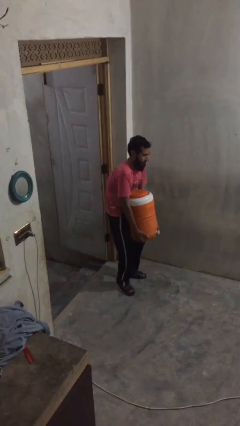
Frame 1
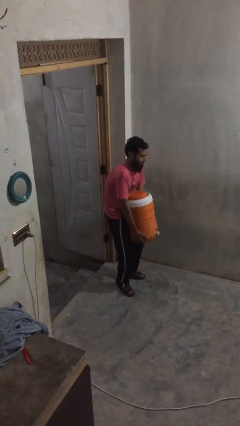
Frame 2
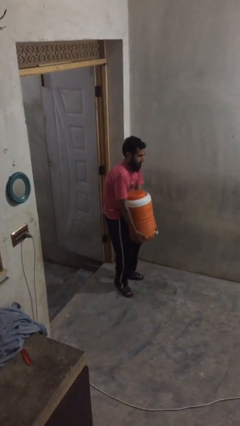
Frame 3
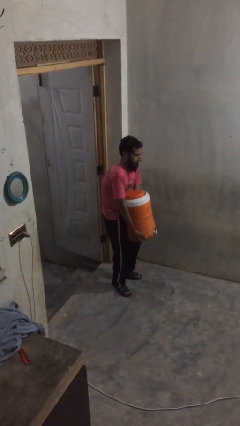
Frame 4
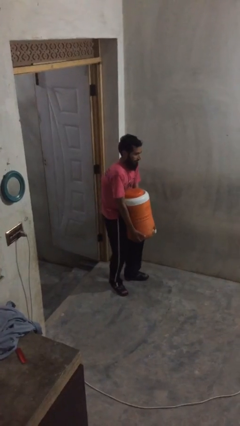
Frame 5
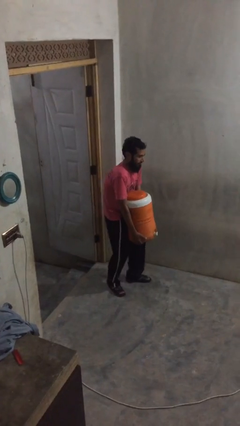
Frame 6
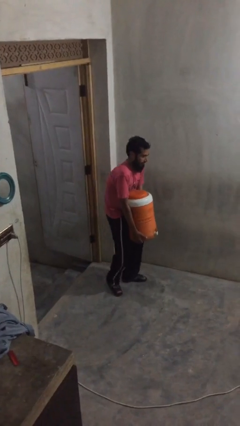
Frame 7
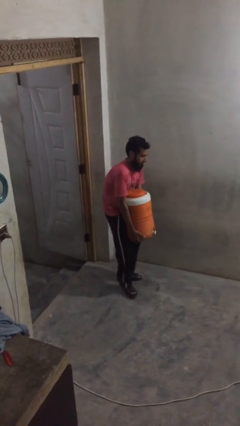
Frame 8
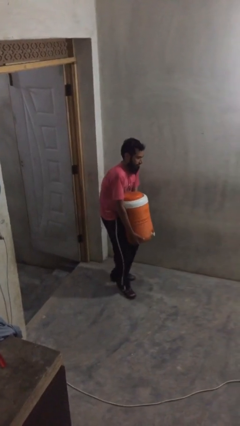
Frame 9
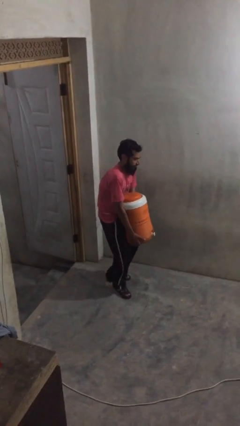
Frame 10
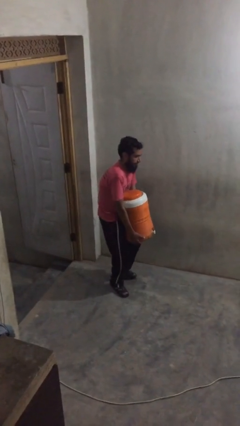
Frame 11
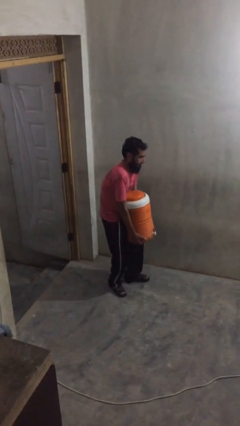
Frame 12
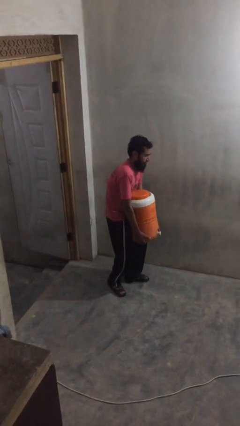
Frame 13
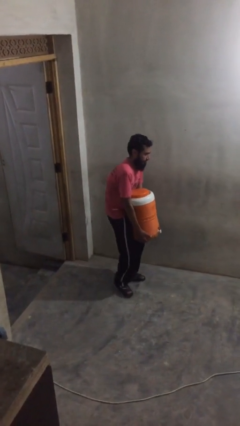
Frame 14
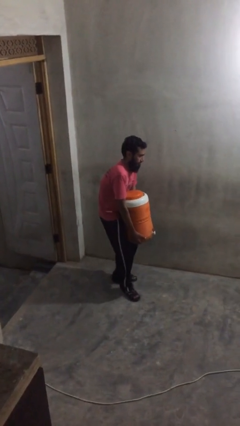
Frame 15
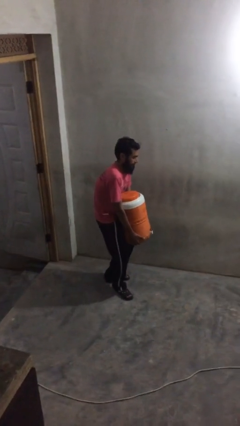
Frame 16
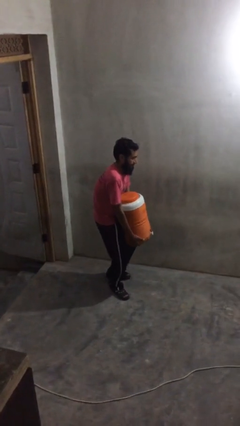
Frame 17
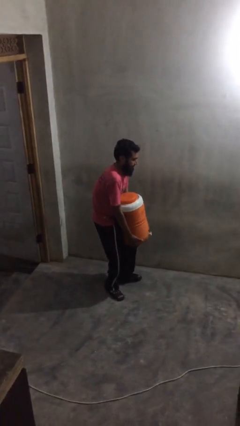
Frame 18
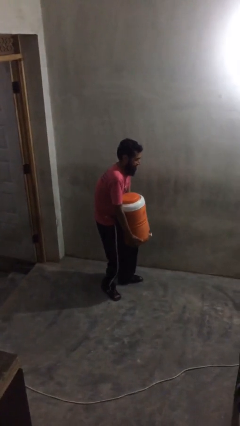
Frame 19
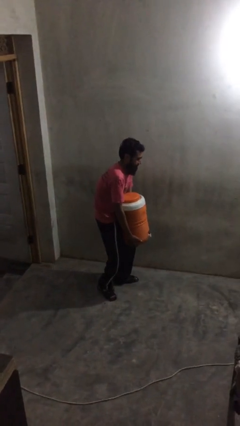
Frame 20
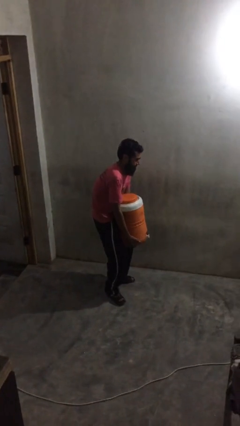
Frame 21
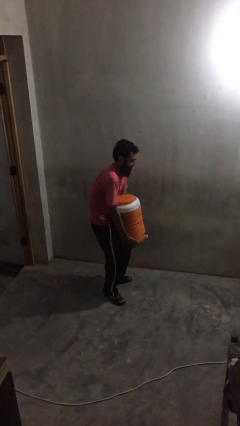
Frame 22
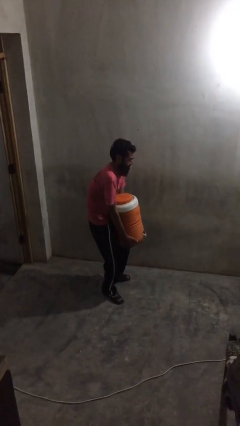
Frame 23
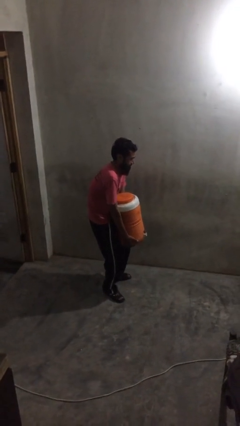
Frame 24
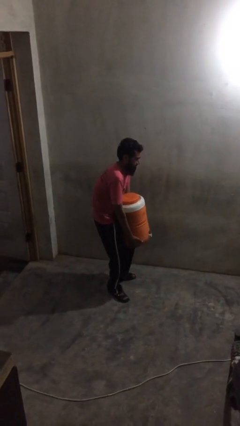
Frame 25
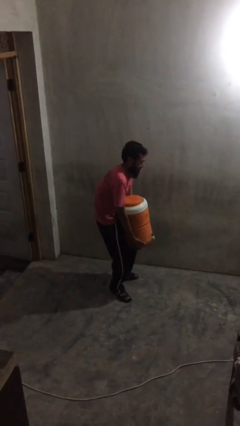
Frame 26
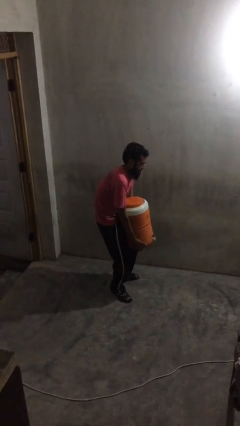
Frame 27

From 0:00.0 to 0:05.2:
person carries heavy object

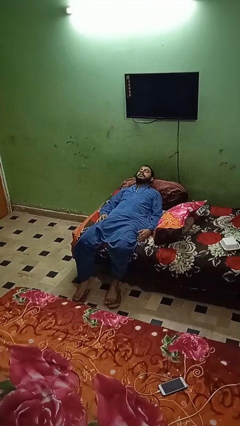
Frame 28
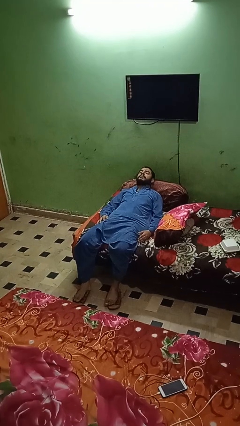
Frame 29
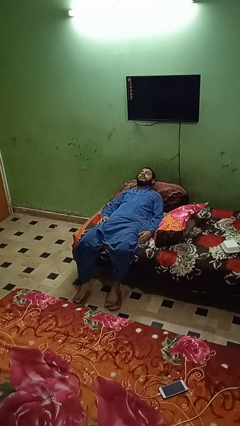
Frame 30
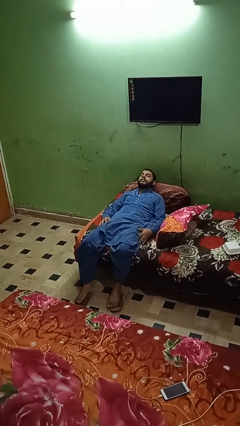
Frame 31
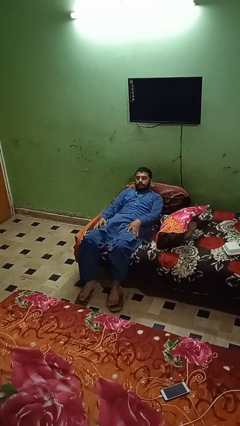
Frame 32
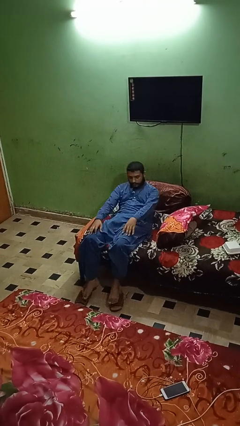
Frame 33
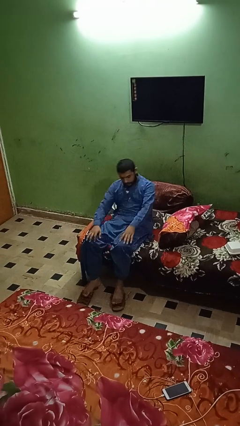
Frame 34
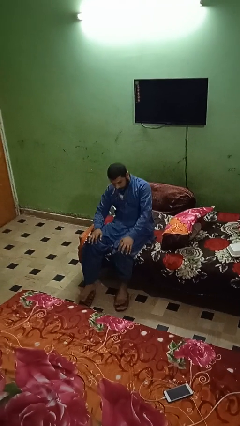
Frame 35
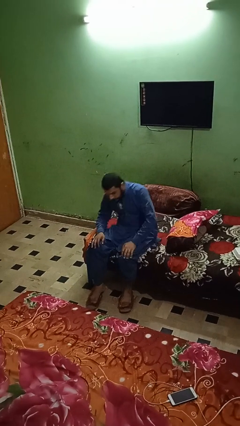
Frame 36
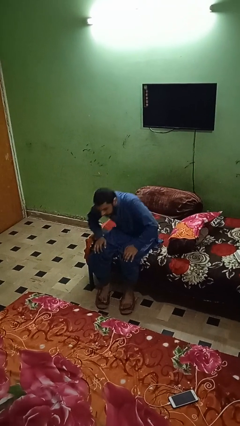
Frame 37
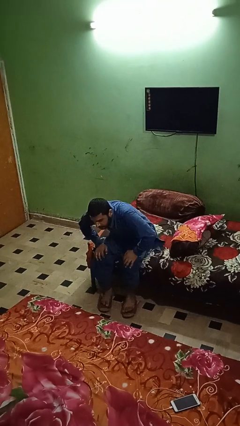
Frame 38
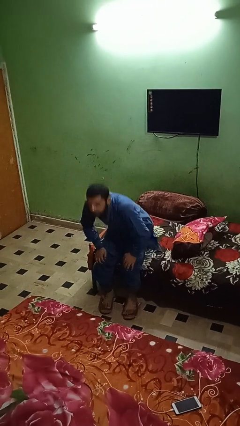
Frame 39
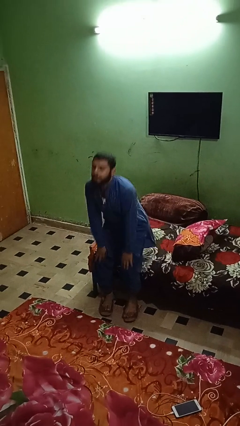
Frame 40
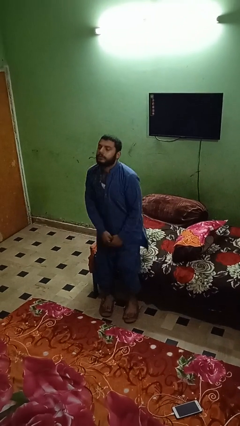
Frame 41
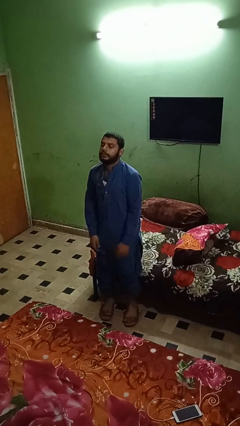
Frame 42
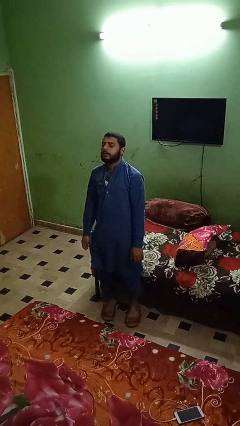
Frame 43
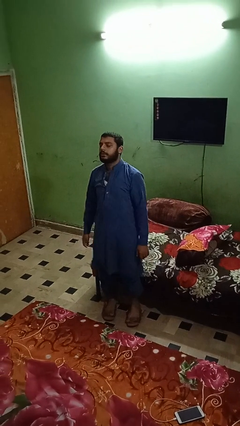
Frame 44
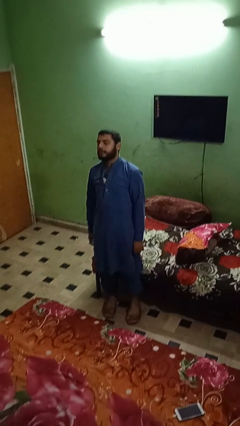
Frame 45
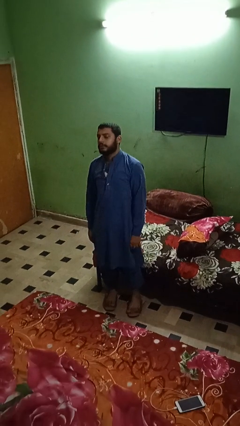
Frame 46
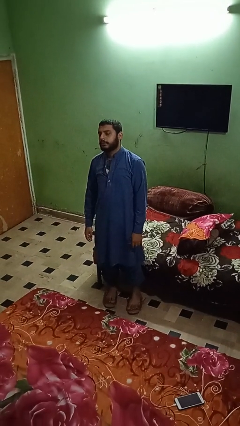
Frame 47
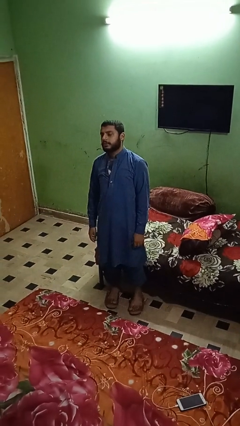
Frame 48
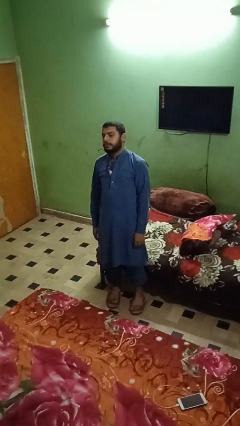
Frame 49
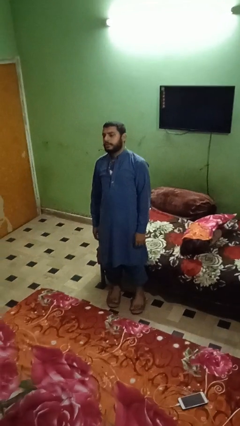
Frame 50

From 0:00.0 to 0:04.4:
person stands up

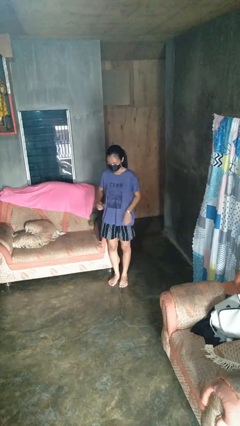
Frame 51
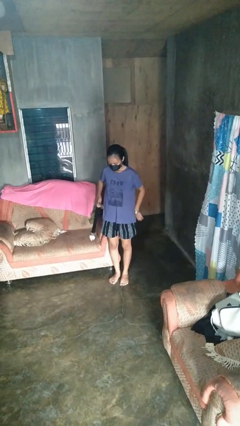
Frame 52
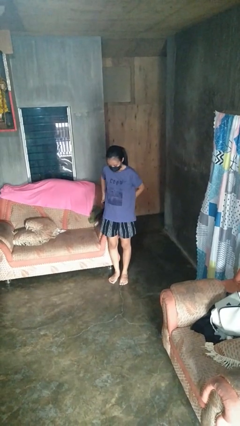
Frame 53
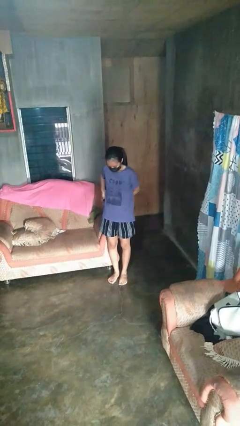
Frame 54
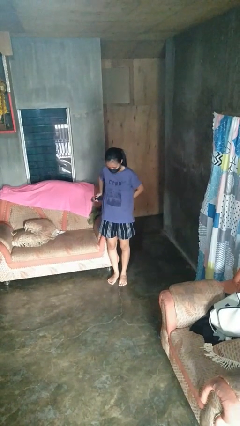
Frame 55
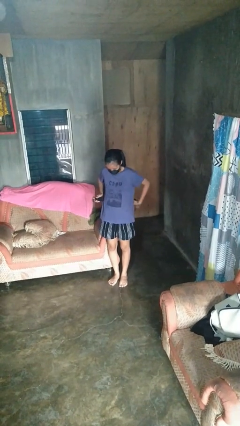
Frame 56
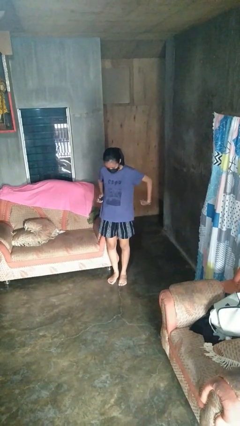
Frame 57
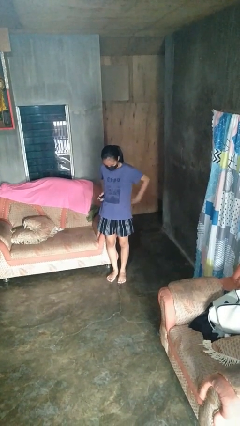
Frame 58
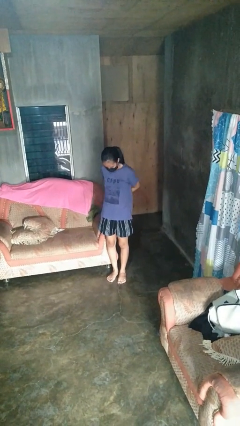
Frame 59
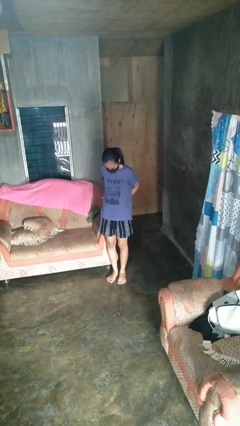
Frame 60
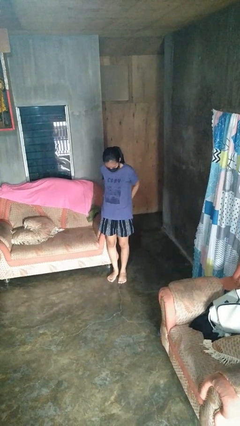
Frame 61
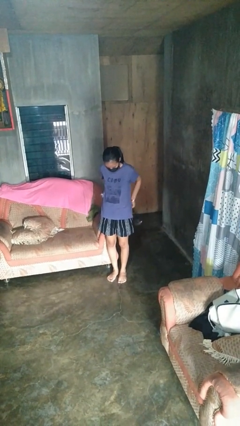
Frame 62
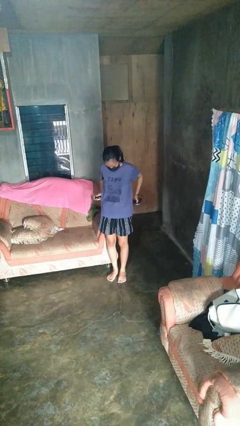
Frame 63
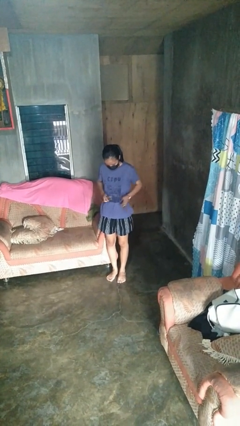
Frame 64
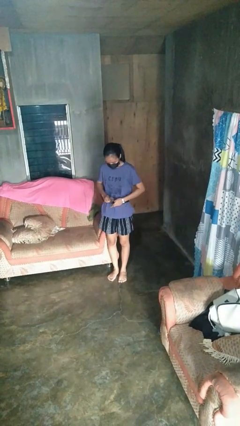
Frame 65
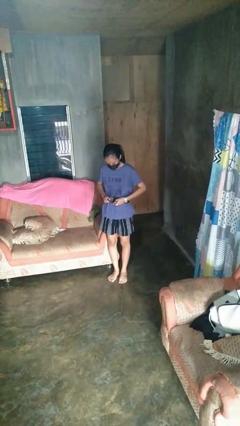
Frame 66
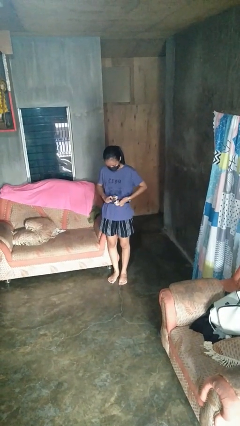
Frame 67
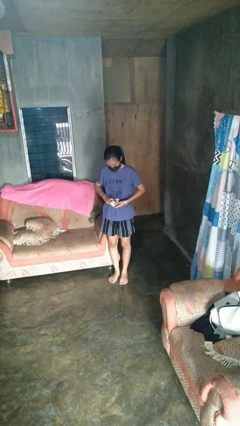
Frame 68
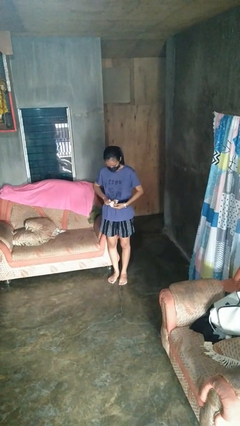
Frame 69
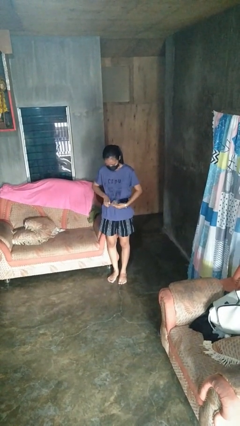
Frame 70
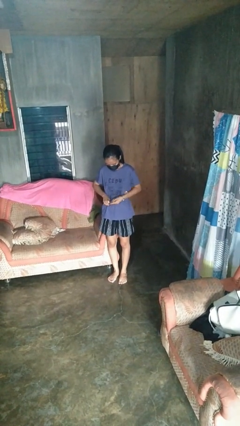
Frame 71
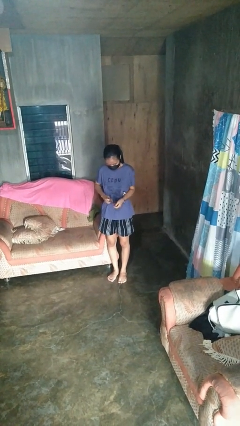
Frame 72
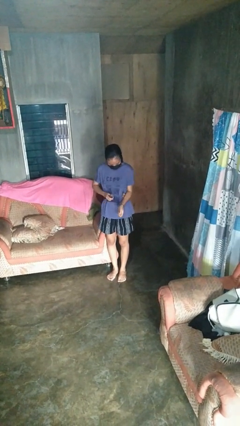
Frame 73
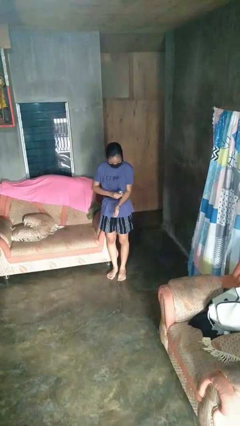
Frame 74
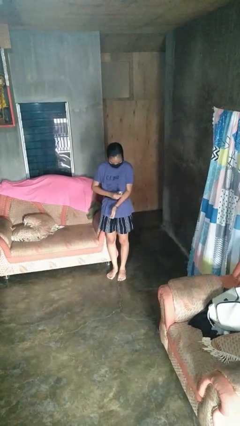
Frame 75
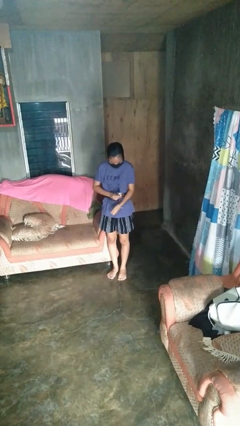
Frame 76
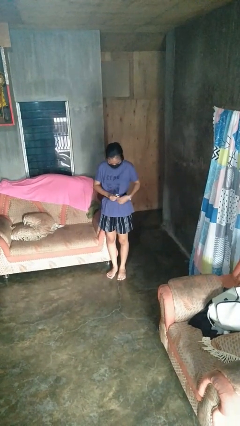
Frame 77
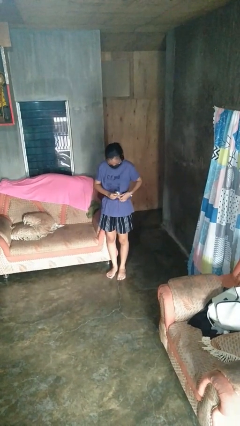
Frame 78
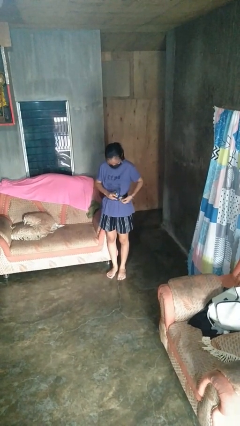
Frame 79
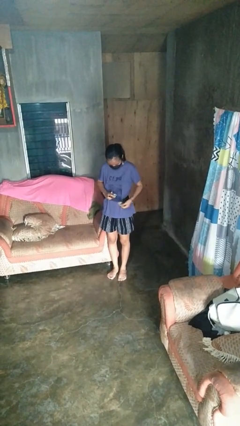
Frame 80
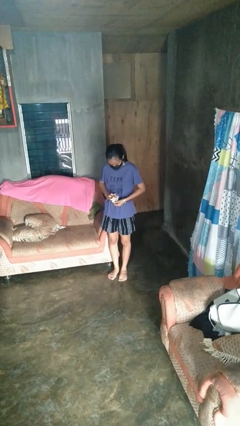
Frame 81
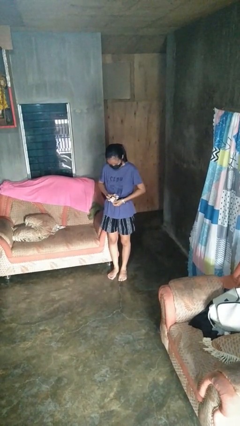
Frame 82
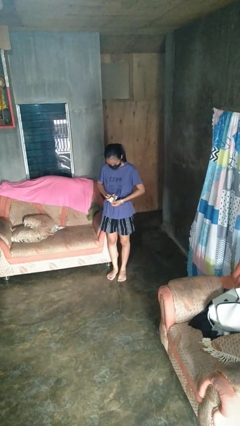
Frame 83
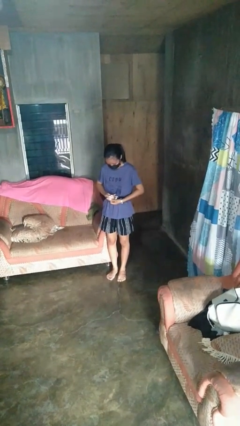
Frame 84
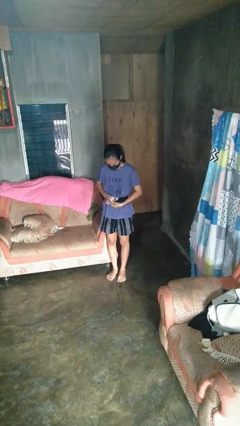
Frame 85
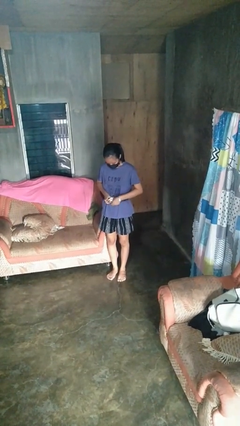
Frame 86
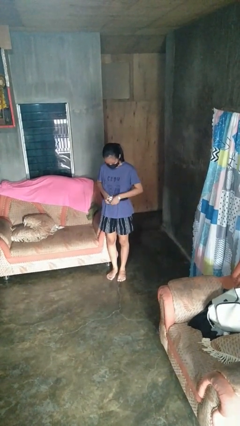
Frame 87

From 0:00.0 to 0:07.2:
person puts on belt

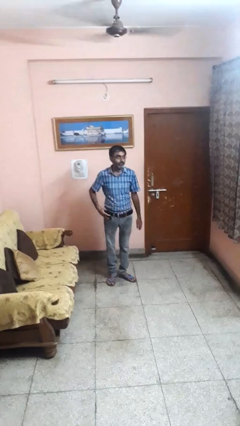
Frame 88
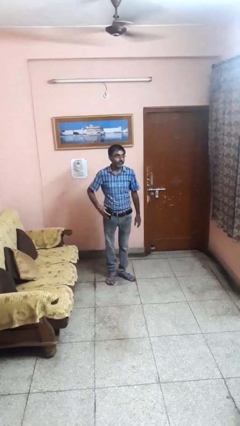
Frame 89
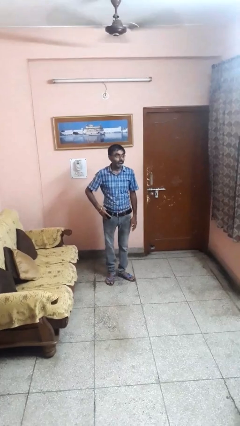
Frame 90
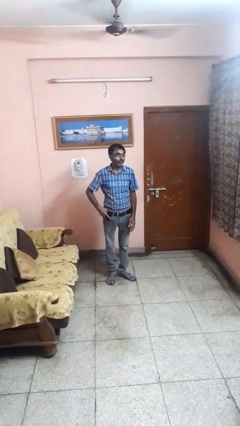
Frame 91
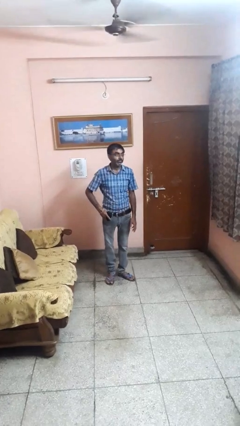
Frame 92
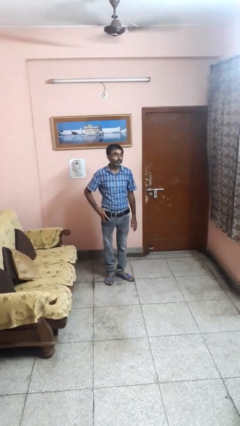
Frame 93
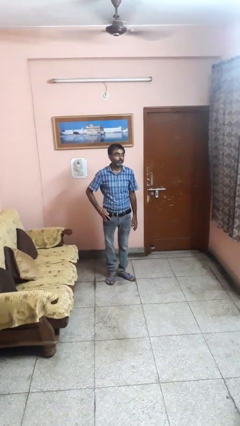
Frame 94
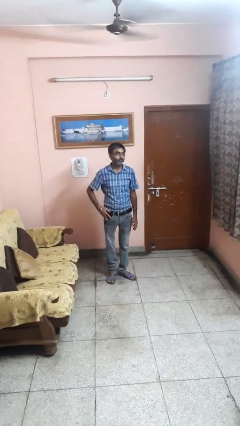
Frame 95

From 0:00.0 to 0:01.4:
person puts phone into pocket
